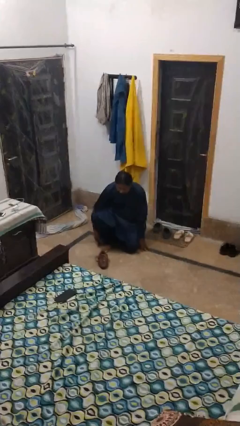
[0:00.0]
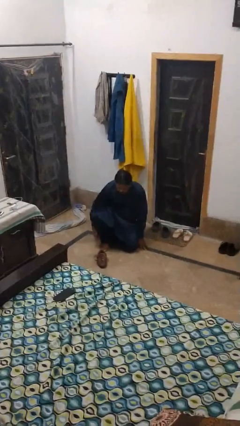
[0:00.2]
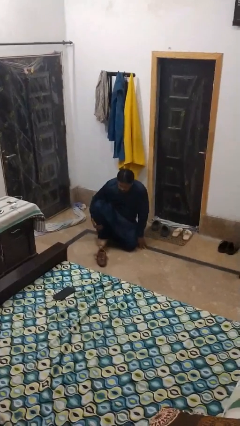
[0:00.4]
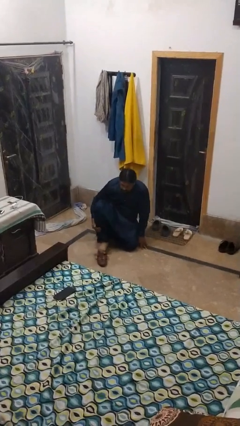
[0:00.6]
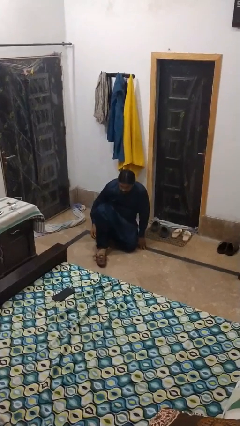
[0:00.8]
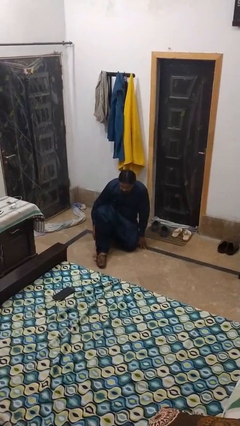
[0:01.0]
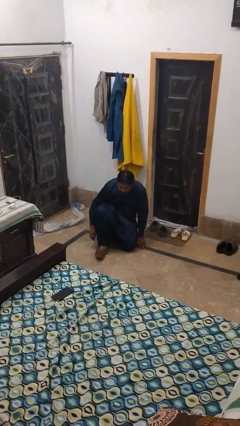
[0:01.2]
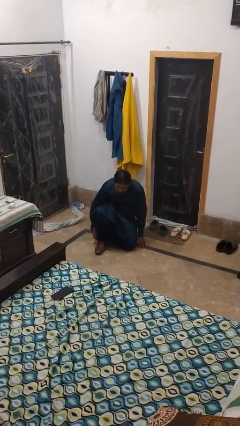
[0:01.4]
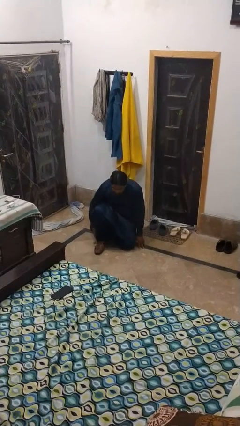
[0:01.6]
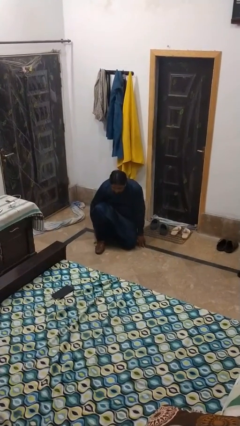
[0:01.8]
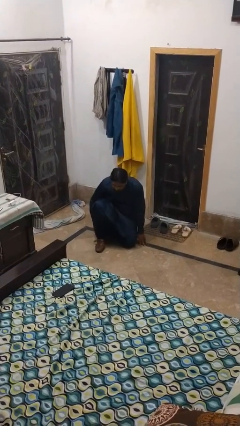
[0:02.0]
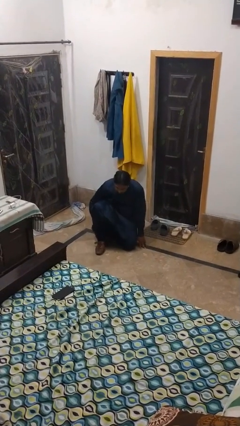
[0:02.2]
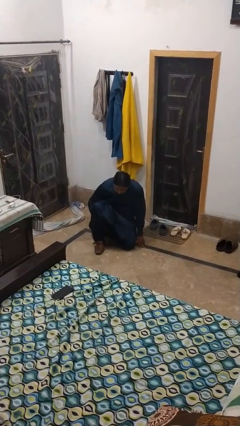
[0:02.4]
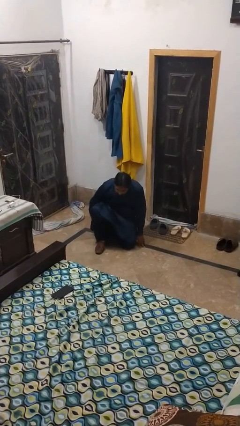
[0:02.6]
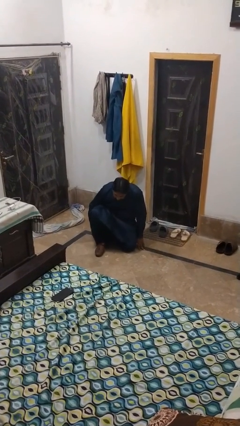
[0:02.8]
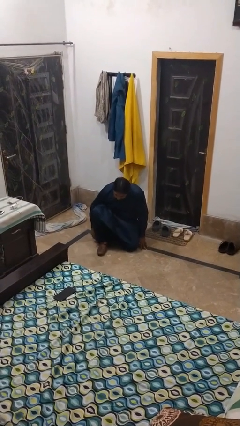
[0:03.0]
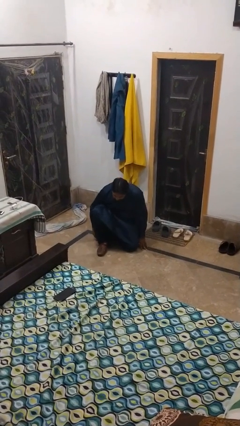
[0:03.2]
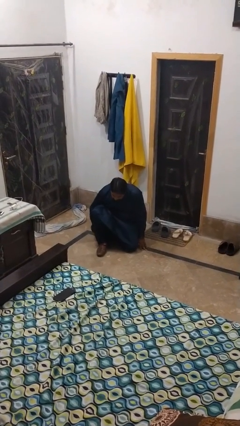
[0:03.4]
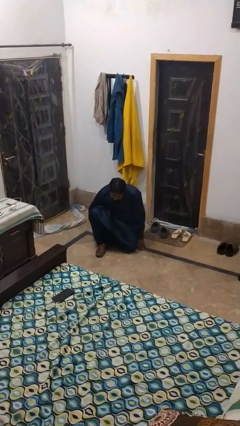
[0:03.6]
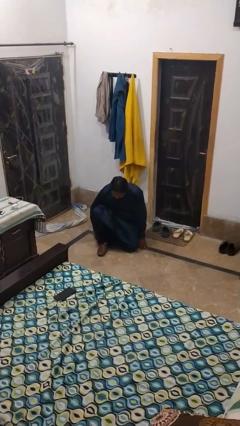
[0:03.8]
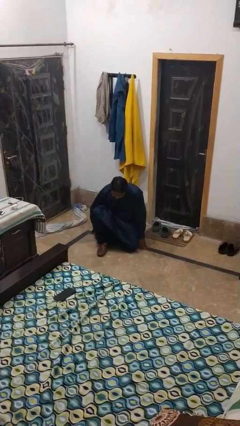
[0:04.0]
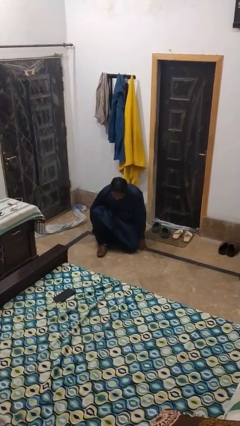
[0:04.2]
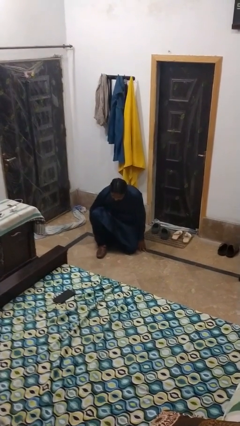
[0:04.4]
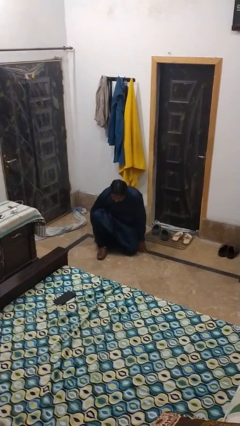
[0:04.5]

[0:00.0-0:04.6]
person puts on shoes

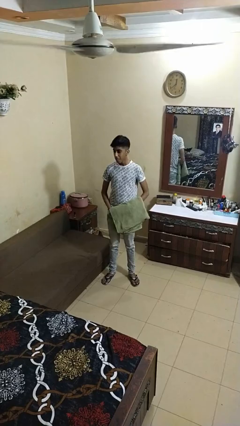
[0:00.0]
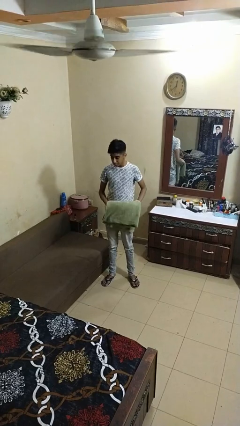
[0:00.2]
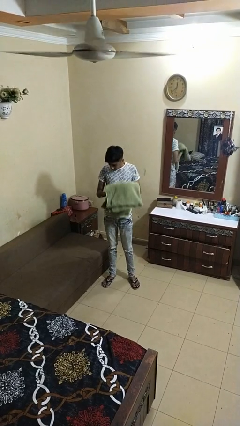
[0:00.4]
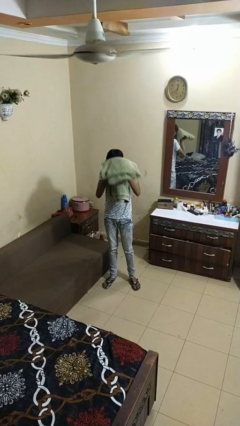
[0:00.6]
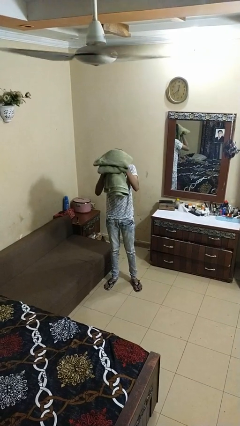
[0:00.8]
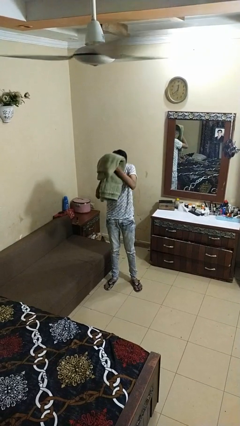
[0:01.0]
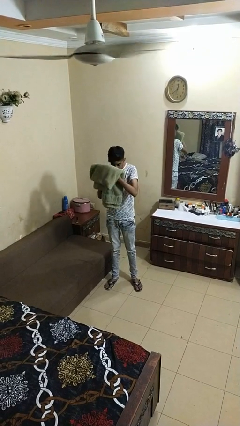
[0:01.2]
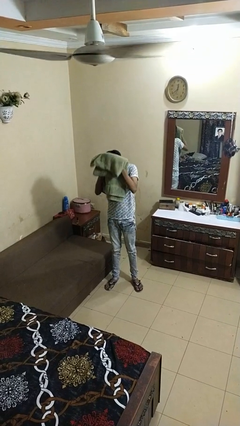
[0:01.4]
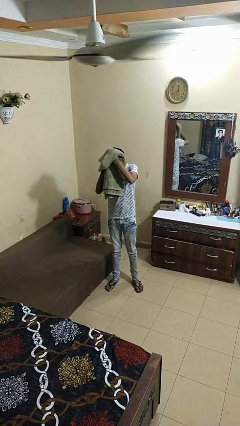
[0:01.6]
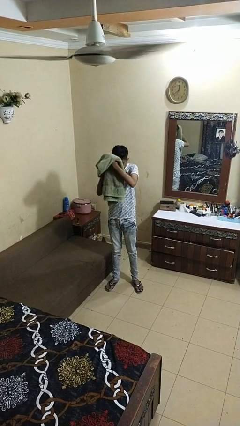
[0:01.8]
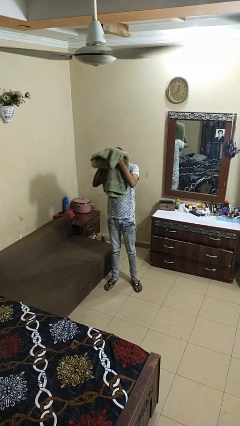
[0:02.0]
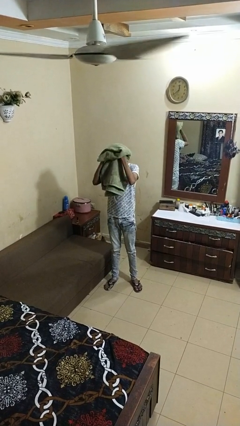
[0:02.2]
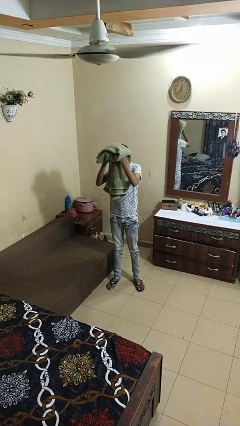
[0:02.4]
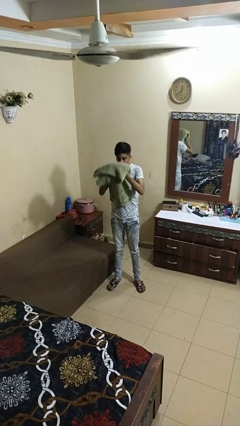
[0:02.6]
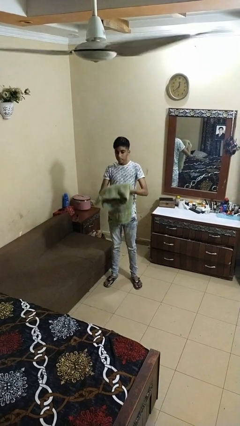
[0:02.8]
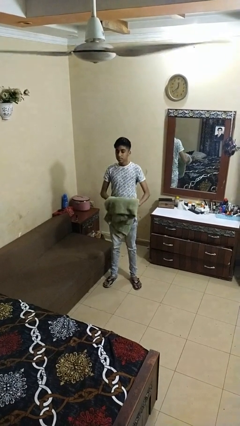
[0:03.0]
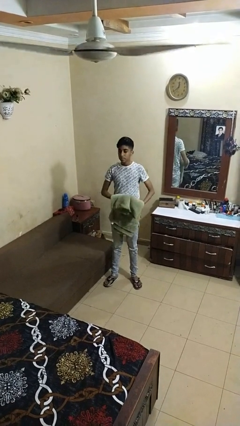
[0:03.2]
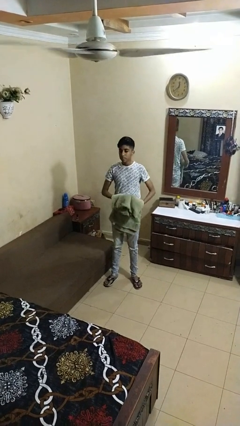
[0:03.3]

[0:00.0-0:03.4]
person dries hair with towel

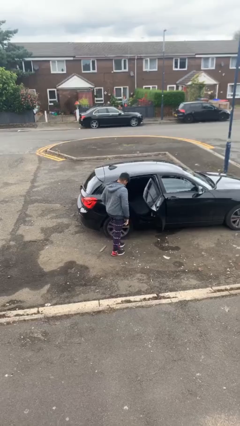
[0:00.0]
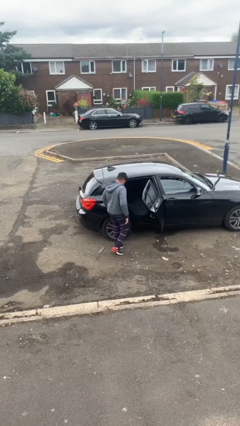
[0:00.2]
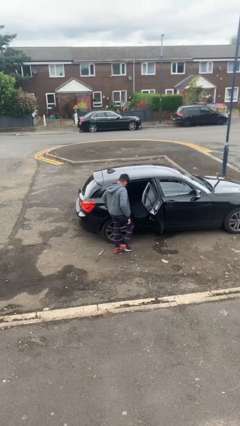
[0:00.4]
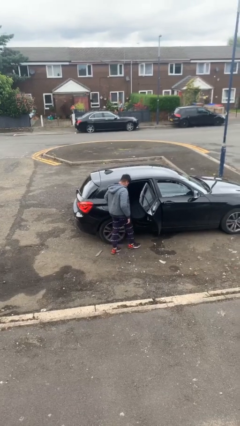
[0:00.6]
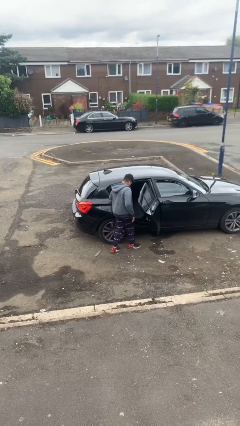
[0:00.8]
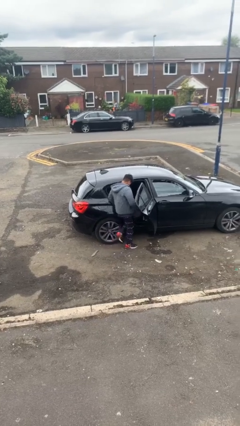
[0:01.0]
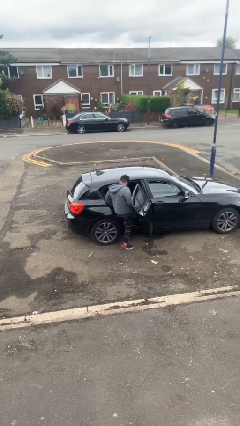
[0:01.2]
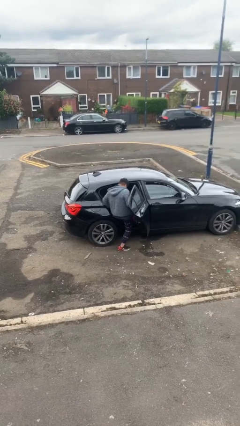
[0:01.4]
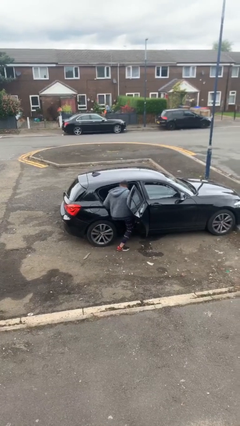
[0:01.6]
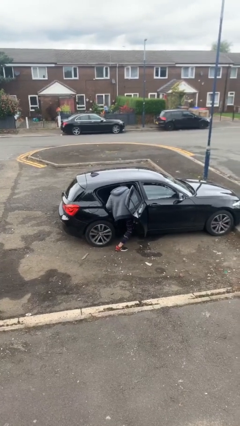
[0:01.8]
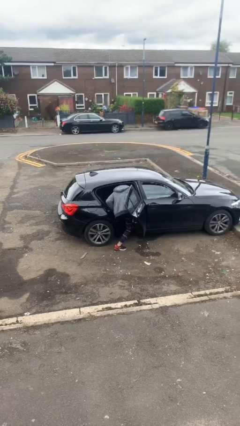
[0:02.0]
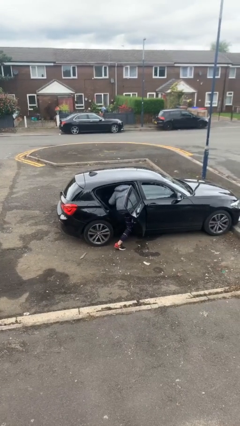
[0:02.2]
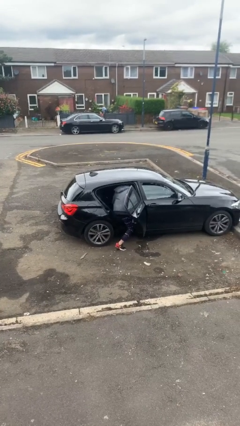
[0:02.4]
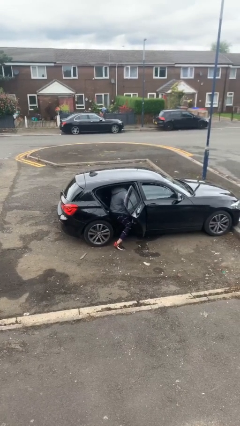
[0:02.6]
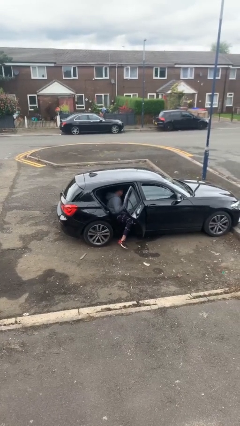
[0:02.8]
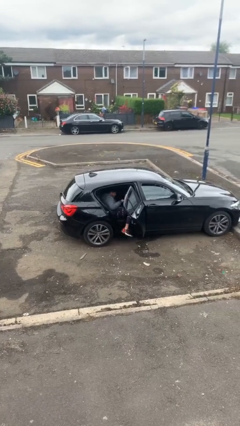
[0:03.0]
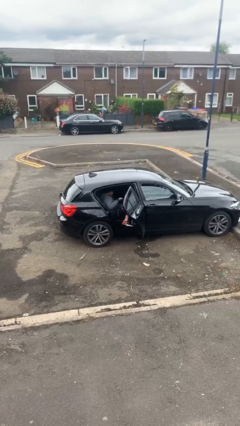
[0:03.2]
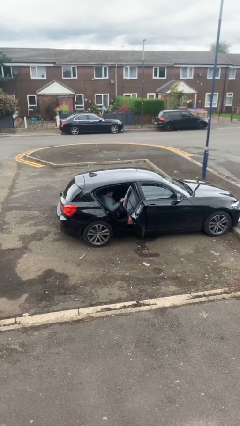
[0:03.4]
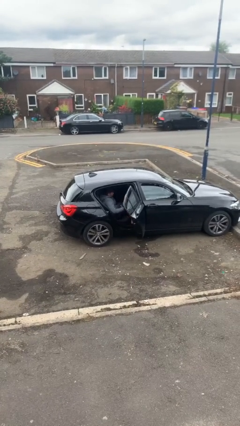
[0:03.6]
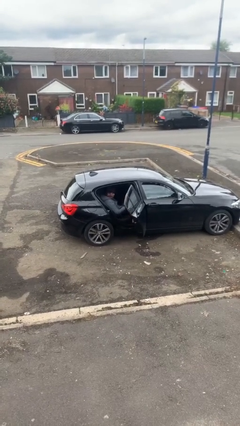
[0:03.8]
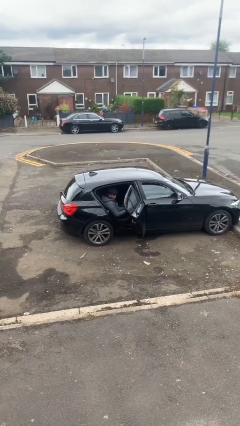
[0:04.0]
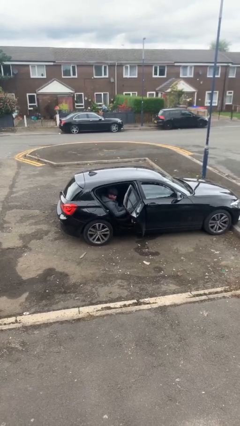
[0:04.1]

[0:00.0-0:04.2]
person enters car

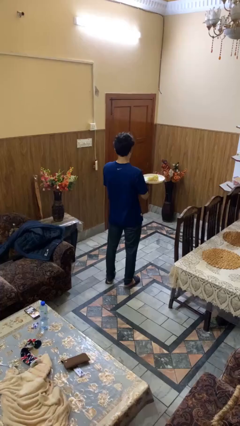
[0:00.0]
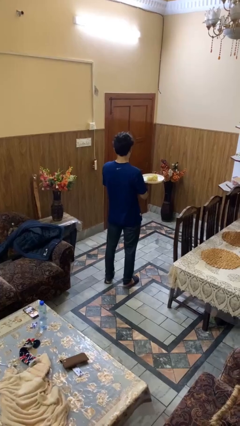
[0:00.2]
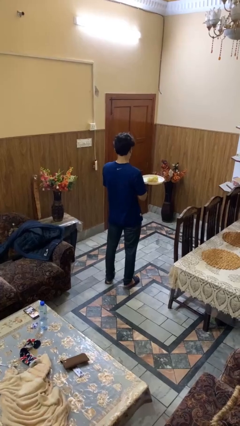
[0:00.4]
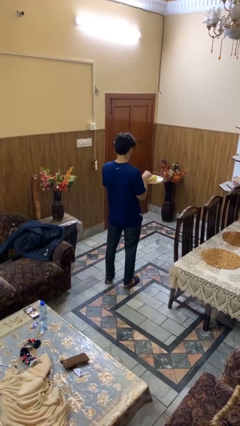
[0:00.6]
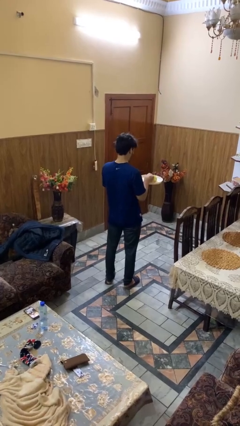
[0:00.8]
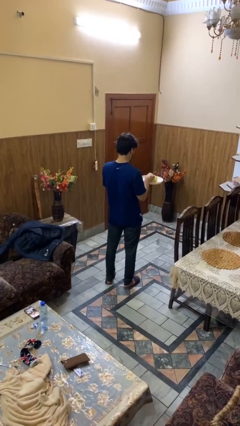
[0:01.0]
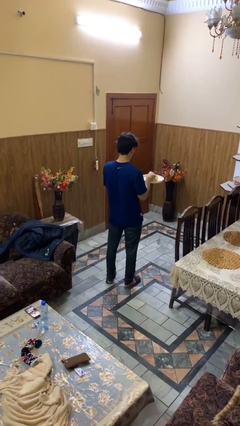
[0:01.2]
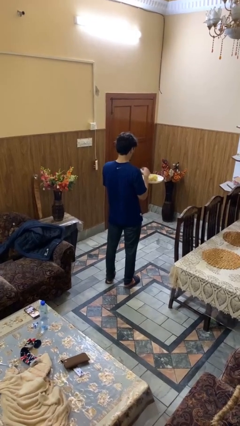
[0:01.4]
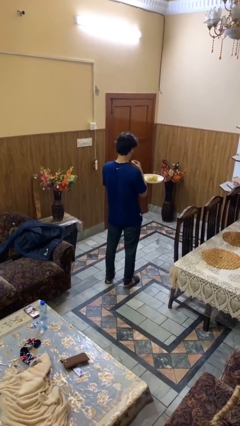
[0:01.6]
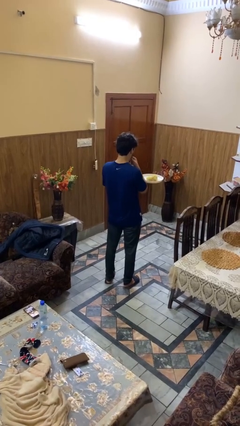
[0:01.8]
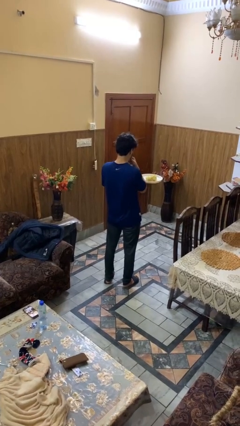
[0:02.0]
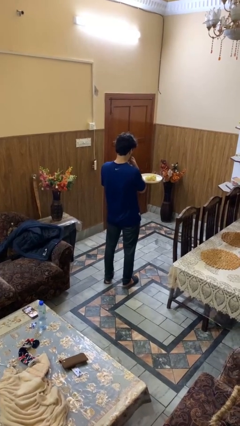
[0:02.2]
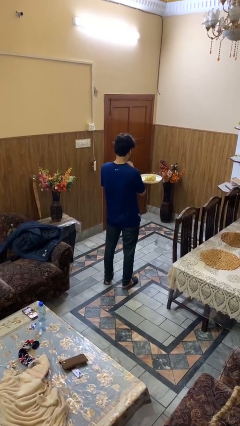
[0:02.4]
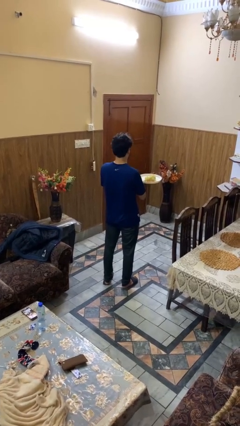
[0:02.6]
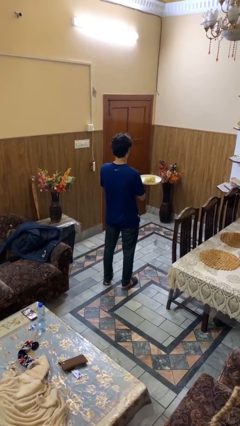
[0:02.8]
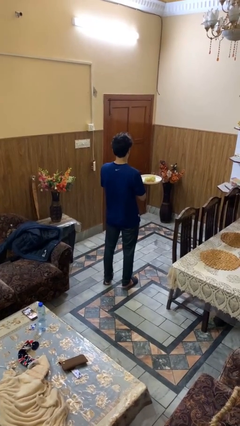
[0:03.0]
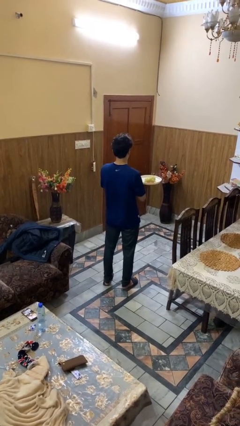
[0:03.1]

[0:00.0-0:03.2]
person eats with hands

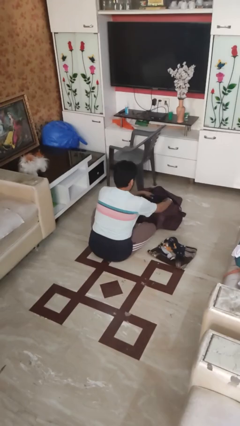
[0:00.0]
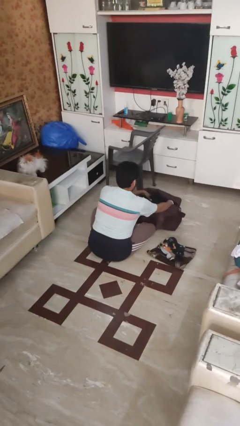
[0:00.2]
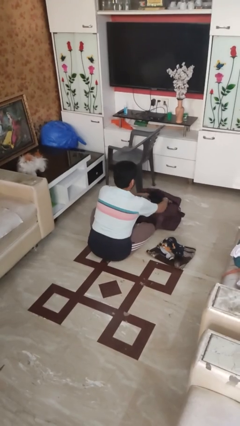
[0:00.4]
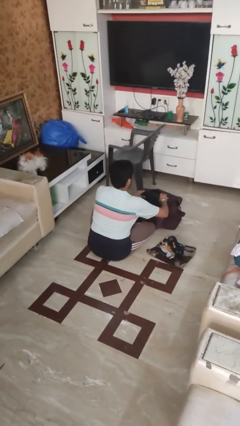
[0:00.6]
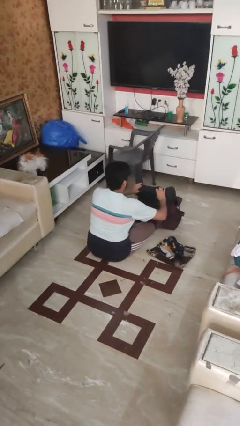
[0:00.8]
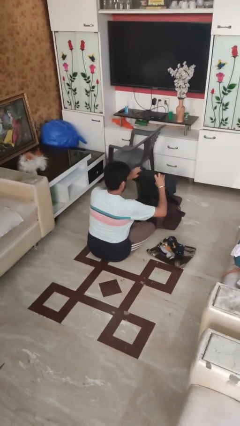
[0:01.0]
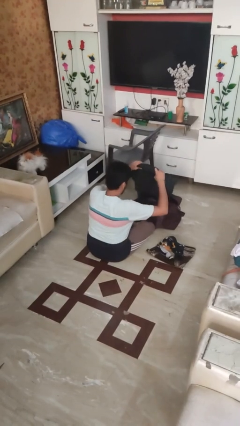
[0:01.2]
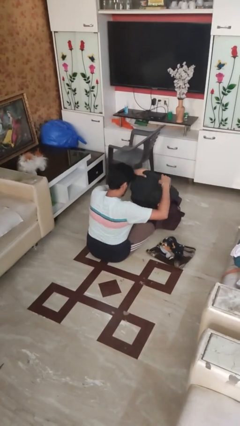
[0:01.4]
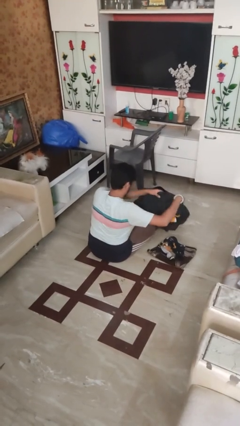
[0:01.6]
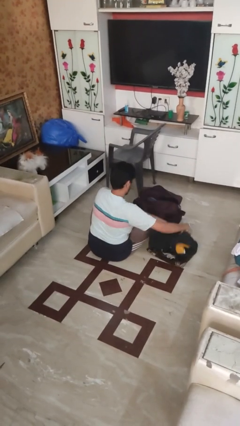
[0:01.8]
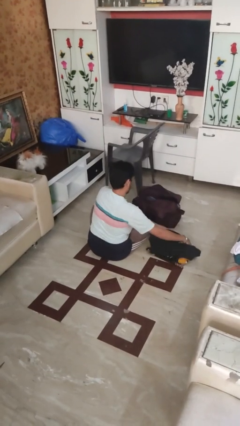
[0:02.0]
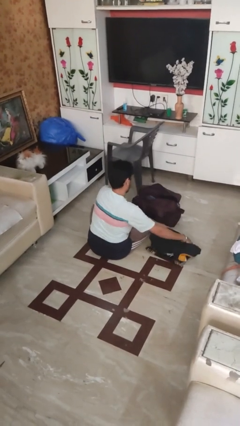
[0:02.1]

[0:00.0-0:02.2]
person unloads clothes from suitcase

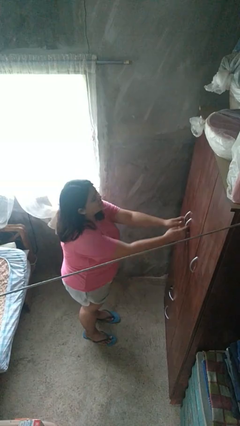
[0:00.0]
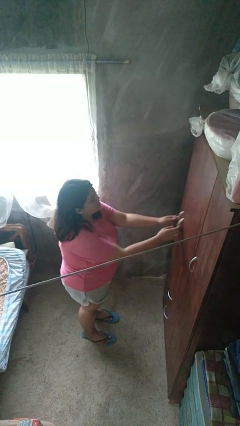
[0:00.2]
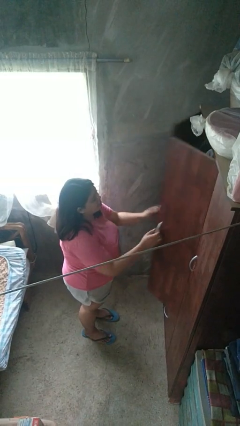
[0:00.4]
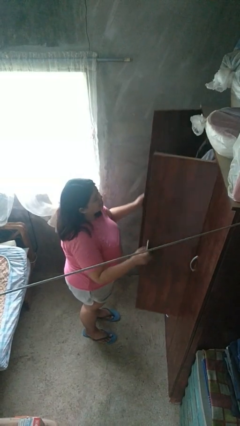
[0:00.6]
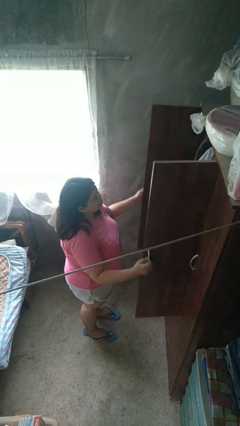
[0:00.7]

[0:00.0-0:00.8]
person opens closet door
